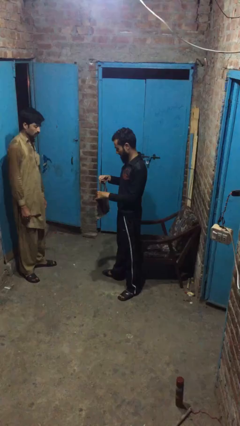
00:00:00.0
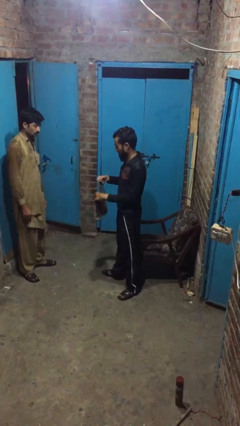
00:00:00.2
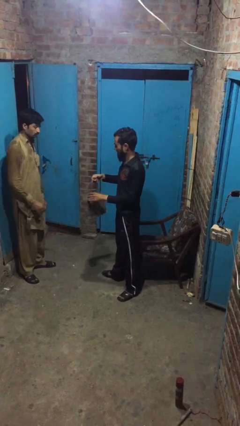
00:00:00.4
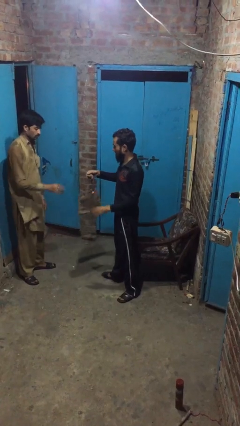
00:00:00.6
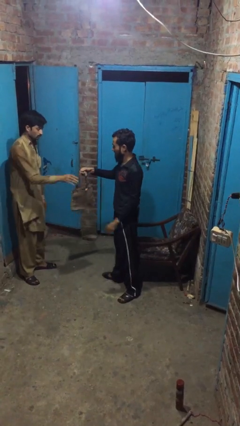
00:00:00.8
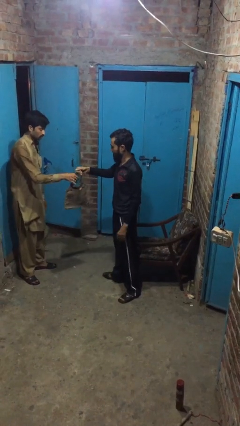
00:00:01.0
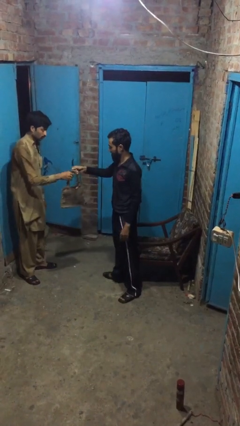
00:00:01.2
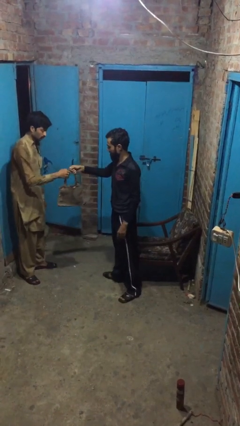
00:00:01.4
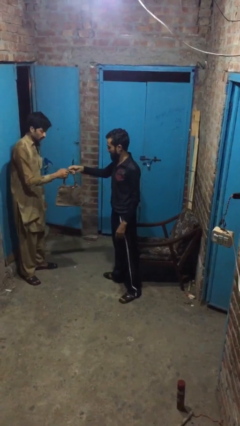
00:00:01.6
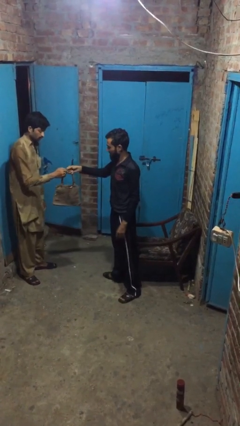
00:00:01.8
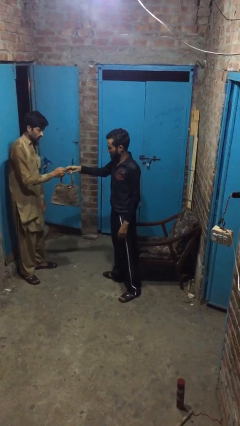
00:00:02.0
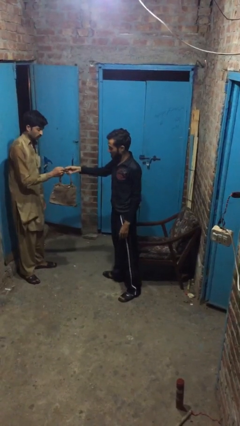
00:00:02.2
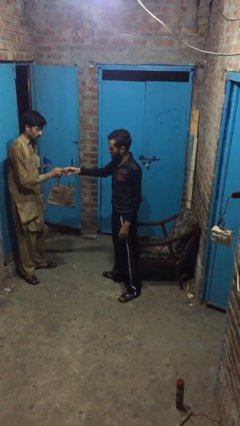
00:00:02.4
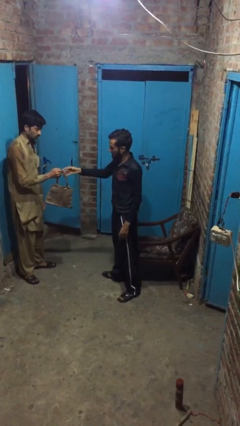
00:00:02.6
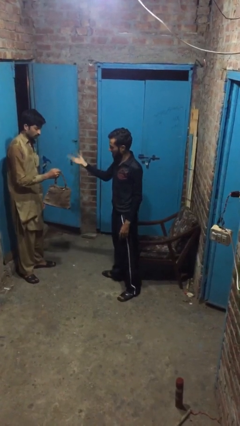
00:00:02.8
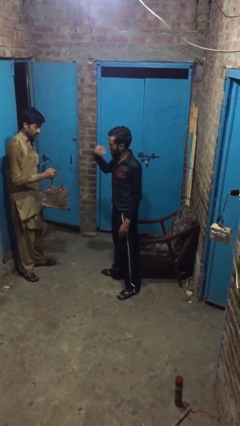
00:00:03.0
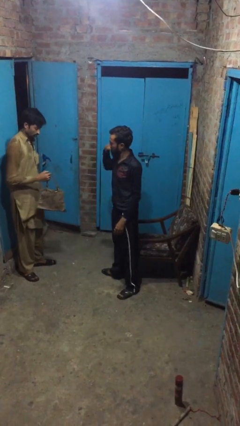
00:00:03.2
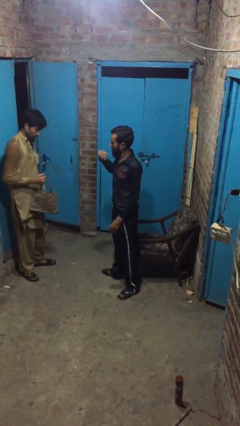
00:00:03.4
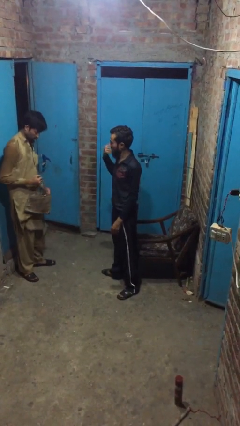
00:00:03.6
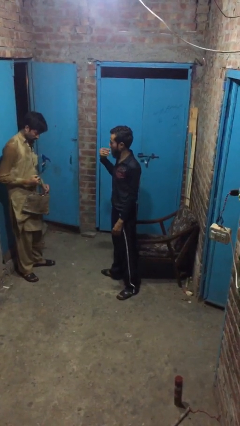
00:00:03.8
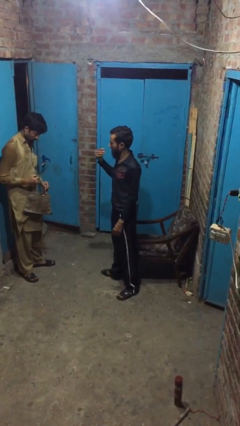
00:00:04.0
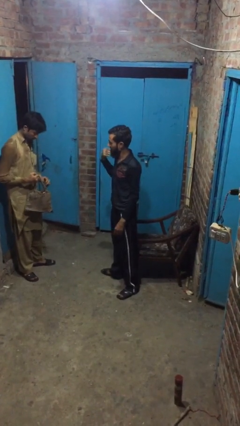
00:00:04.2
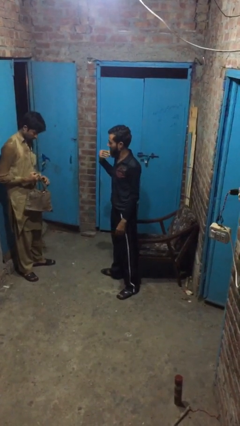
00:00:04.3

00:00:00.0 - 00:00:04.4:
person transfers object to person

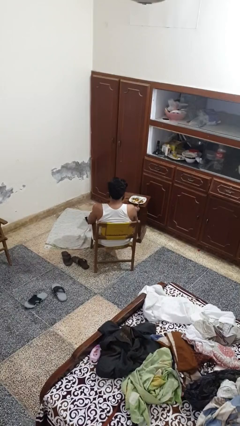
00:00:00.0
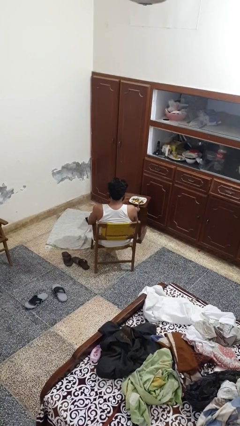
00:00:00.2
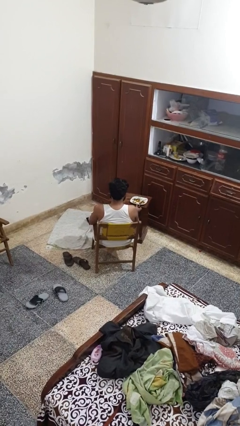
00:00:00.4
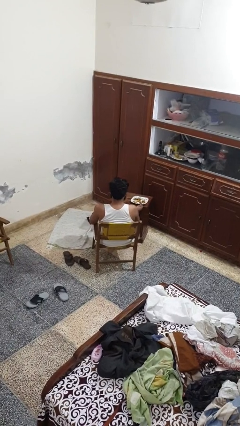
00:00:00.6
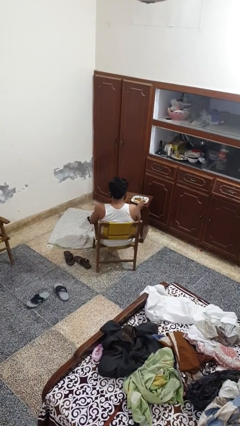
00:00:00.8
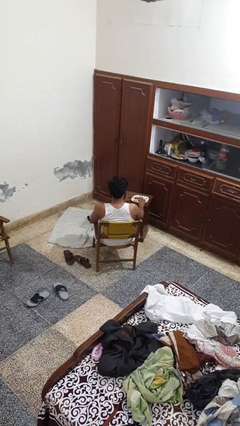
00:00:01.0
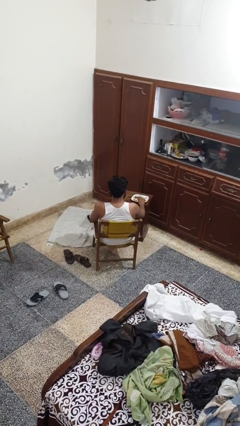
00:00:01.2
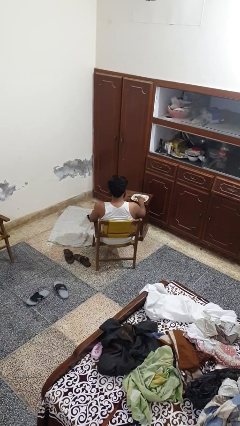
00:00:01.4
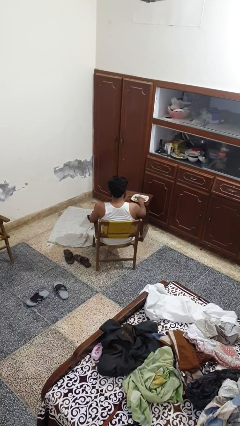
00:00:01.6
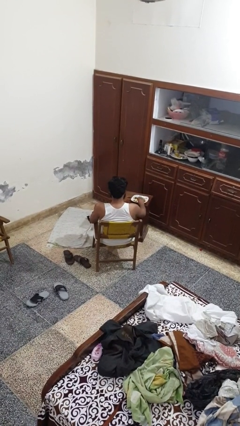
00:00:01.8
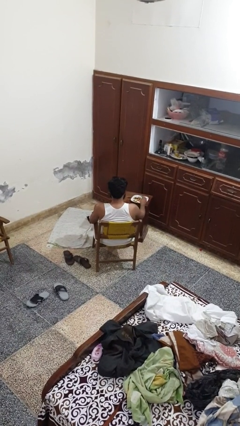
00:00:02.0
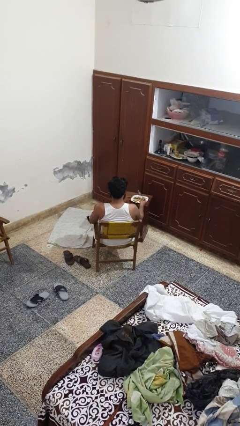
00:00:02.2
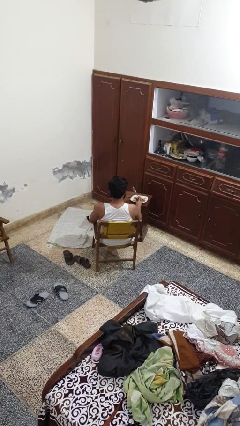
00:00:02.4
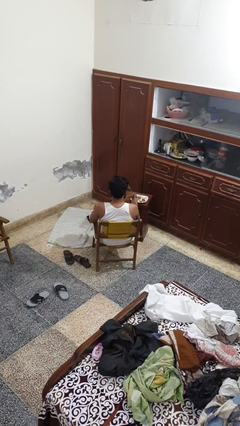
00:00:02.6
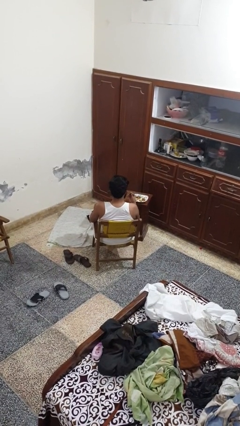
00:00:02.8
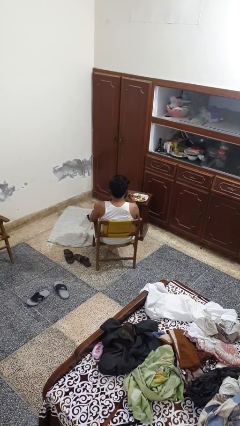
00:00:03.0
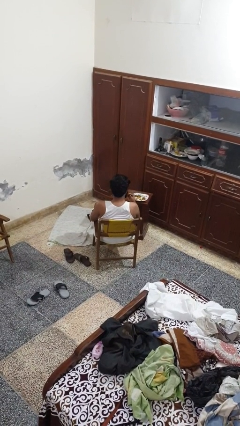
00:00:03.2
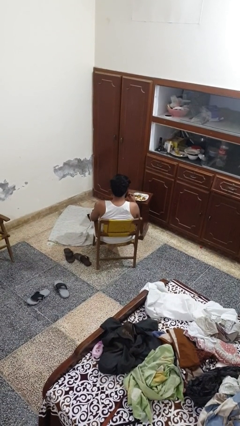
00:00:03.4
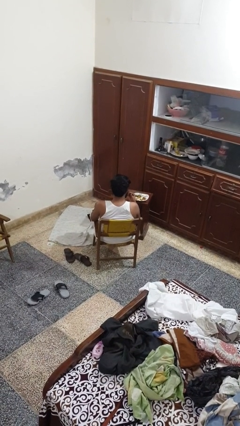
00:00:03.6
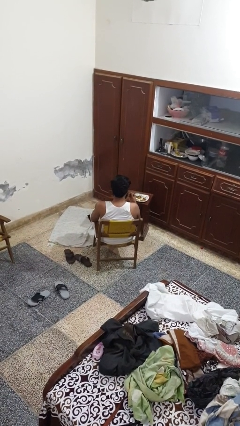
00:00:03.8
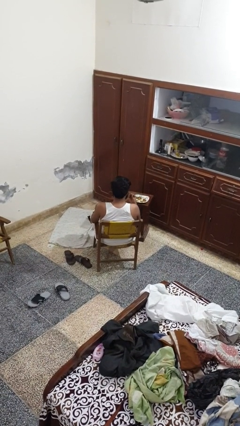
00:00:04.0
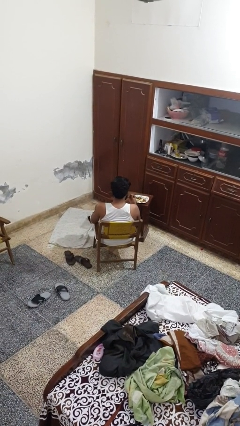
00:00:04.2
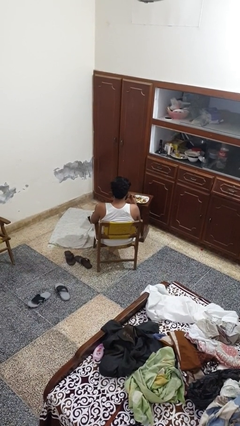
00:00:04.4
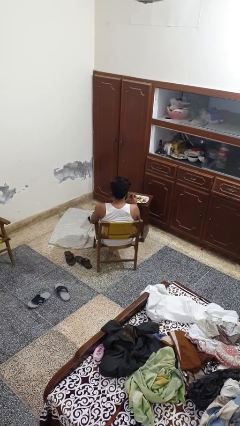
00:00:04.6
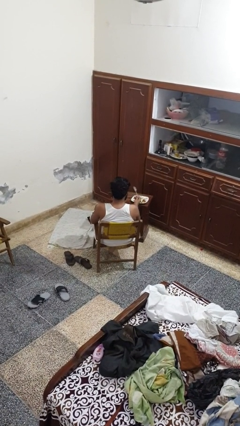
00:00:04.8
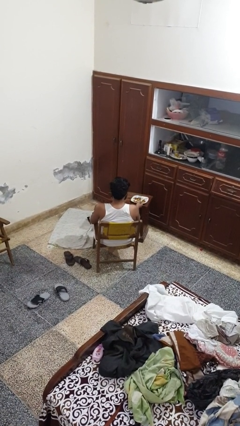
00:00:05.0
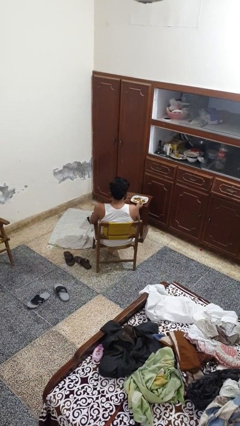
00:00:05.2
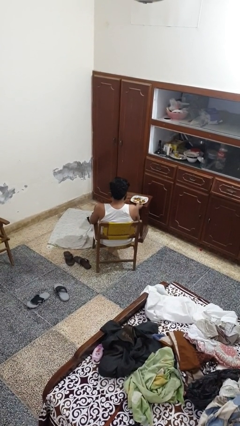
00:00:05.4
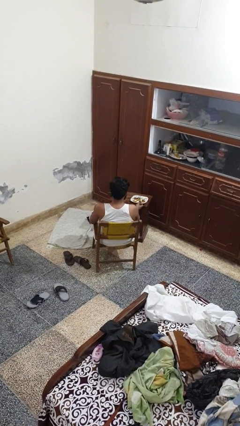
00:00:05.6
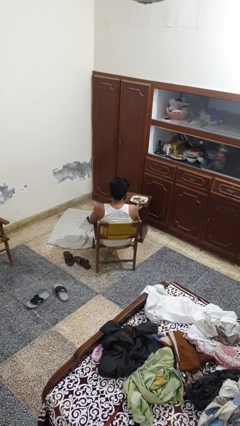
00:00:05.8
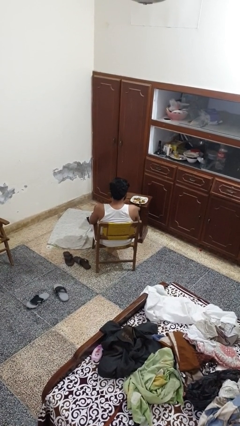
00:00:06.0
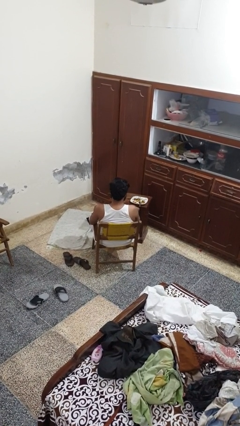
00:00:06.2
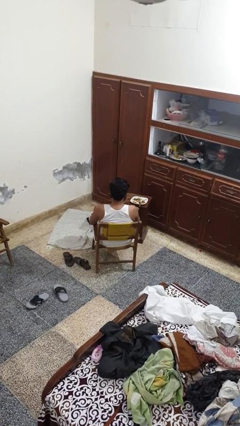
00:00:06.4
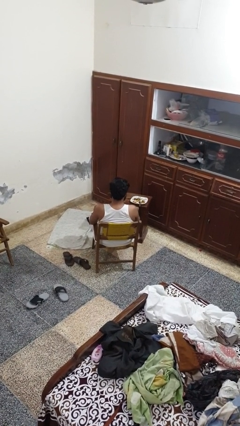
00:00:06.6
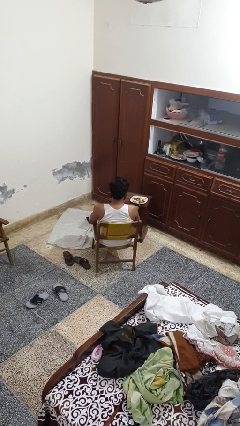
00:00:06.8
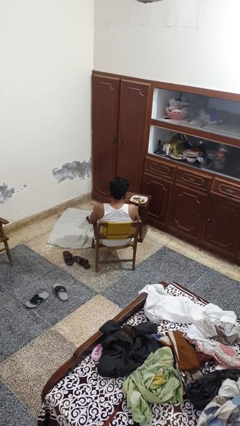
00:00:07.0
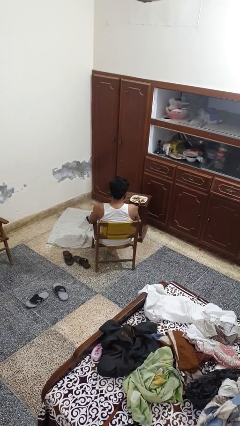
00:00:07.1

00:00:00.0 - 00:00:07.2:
person eats with utensil

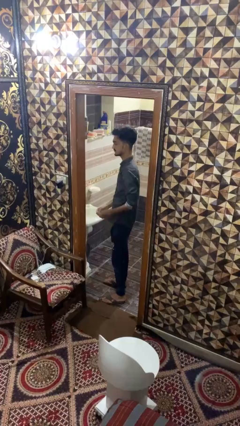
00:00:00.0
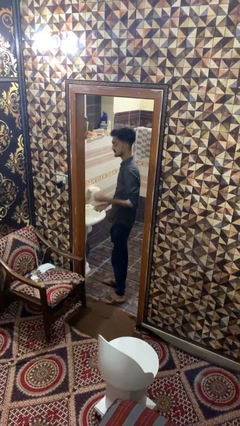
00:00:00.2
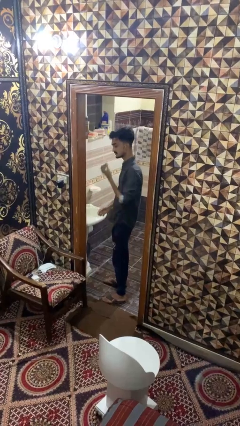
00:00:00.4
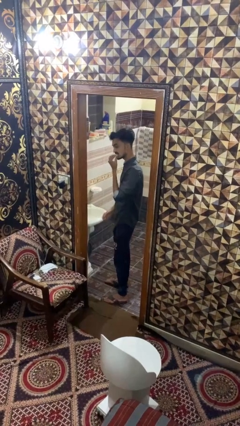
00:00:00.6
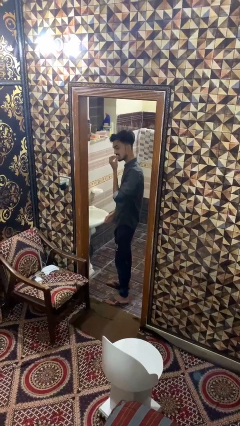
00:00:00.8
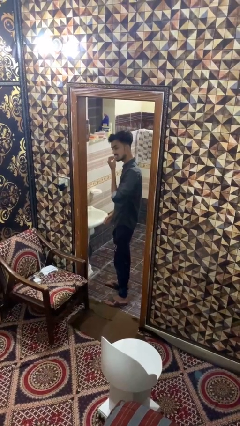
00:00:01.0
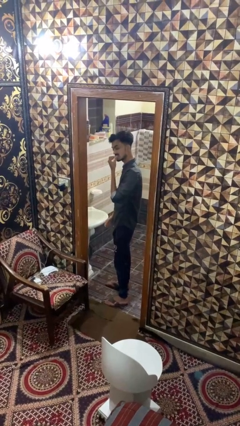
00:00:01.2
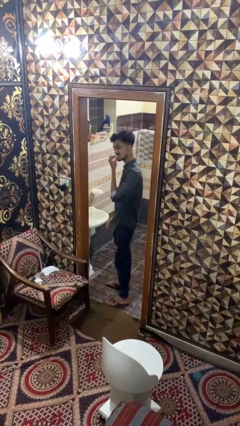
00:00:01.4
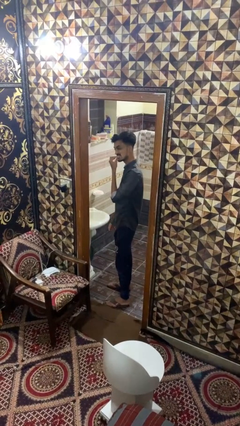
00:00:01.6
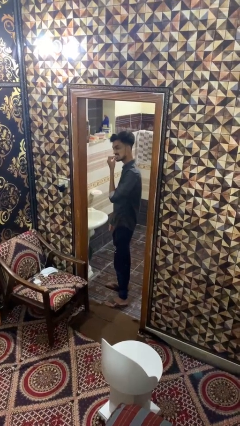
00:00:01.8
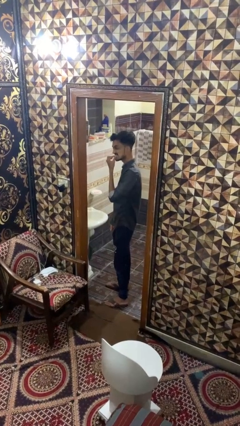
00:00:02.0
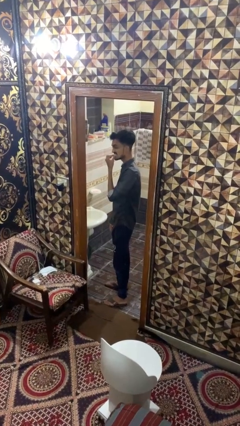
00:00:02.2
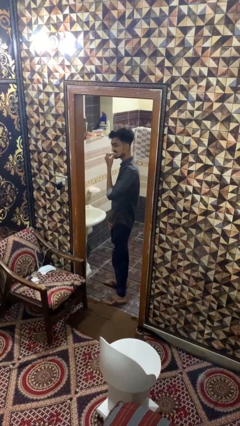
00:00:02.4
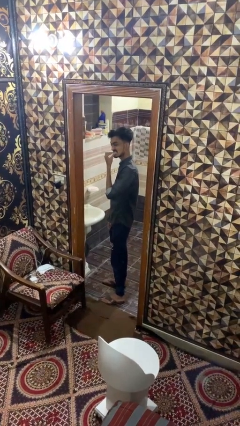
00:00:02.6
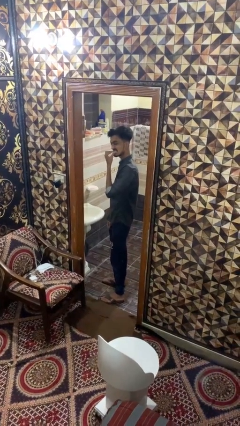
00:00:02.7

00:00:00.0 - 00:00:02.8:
person flosses

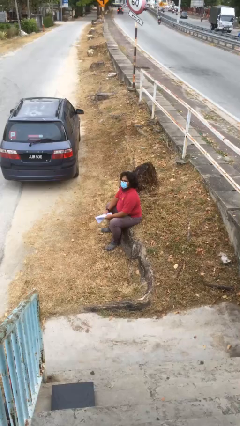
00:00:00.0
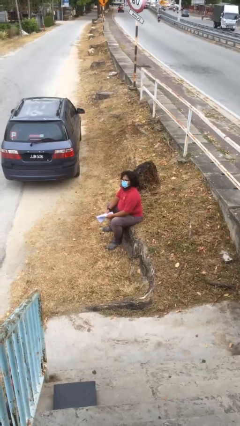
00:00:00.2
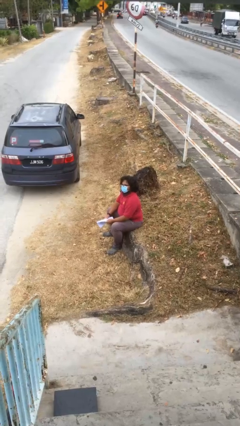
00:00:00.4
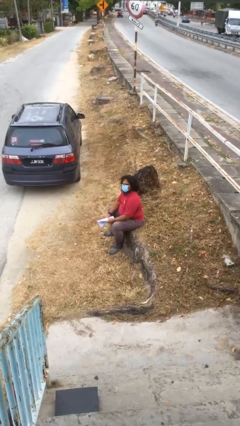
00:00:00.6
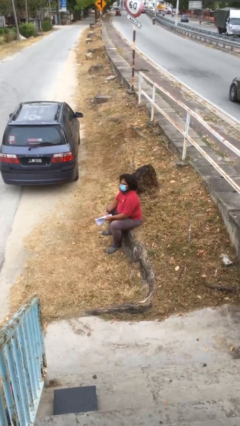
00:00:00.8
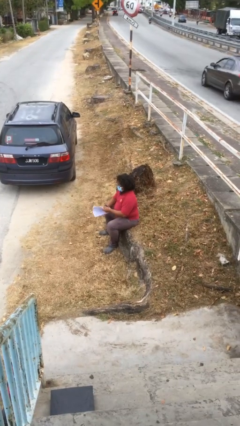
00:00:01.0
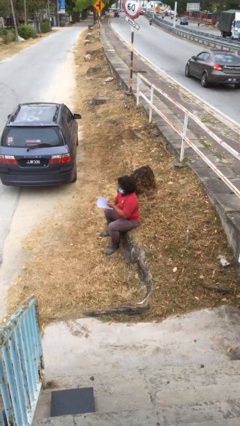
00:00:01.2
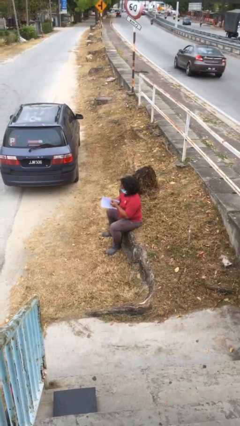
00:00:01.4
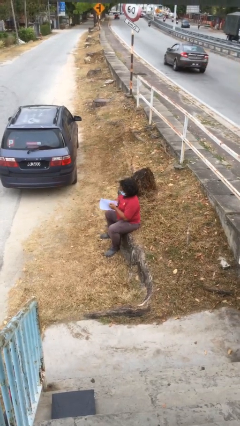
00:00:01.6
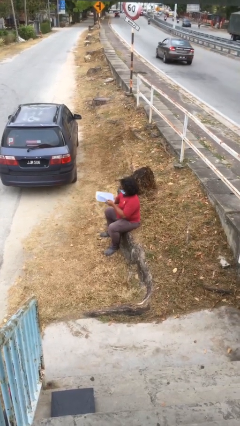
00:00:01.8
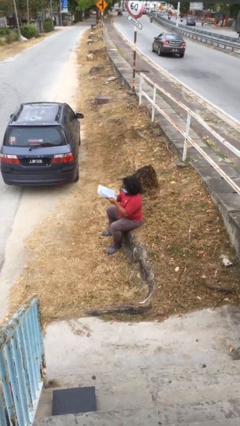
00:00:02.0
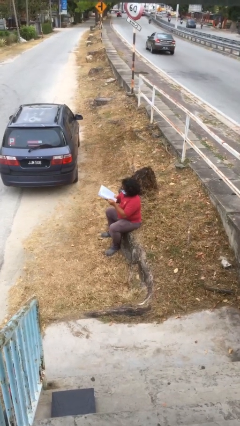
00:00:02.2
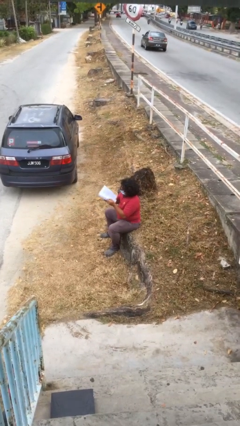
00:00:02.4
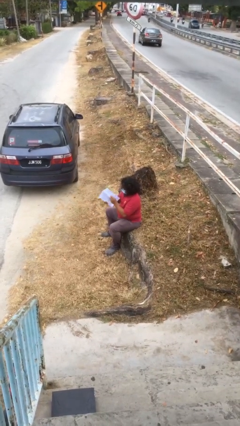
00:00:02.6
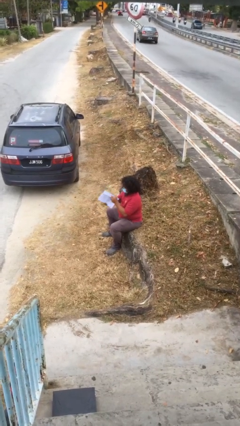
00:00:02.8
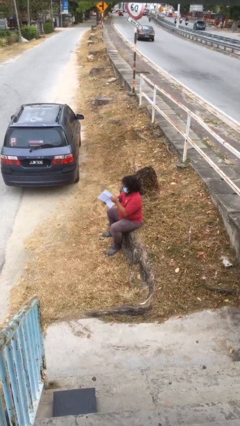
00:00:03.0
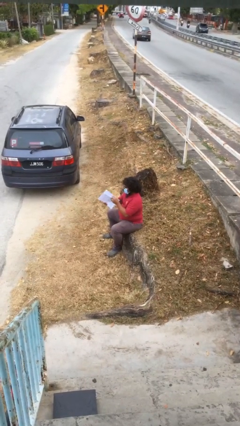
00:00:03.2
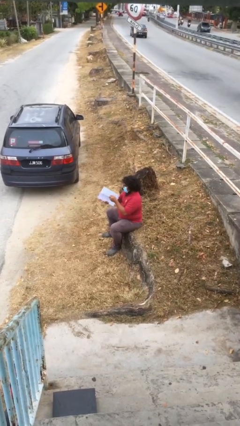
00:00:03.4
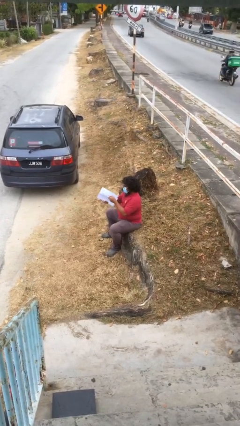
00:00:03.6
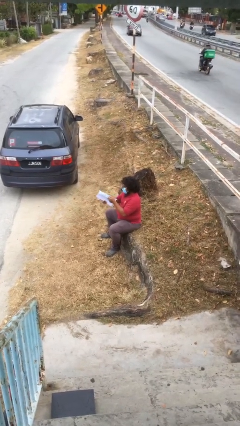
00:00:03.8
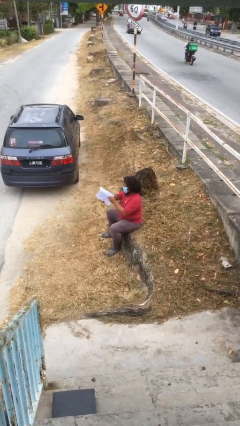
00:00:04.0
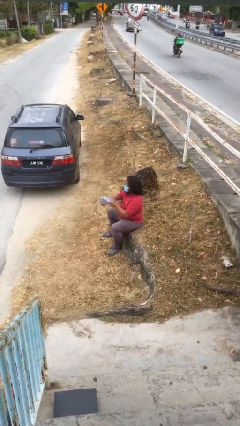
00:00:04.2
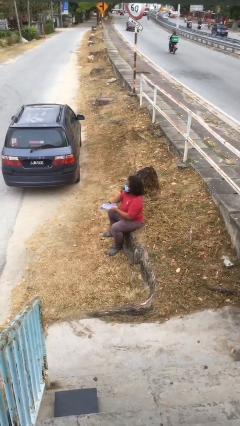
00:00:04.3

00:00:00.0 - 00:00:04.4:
person reads document
